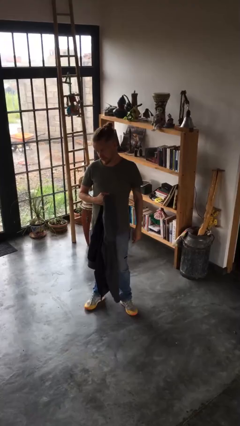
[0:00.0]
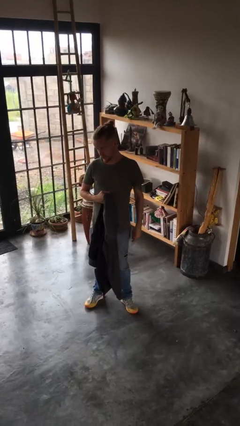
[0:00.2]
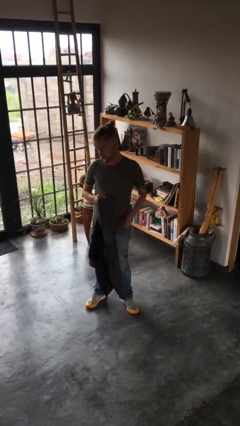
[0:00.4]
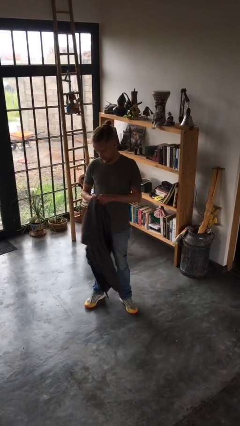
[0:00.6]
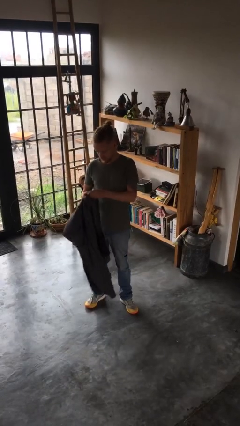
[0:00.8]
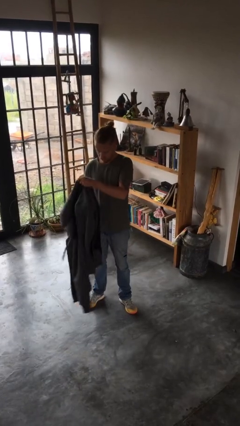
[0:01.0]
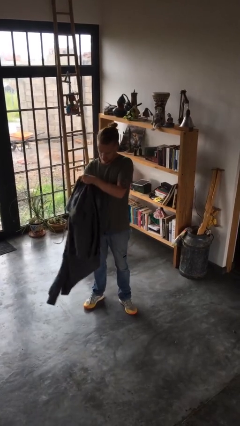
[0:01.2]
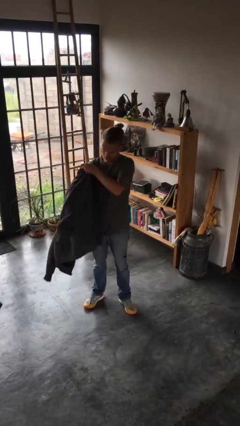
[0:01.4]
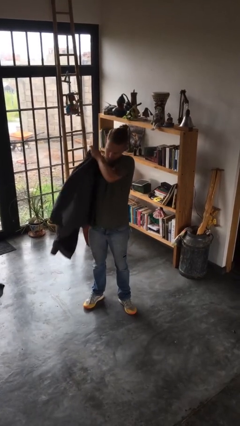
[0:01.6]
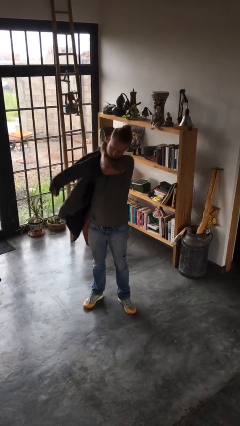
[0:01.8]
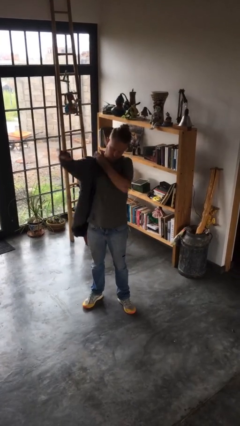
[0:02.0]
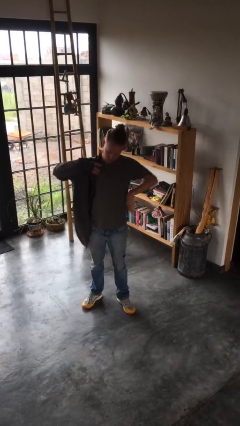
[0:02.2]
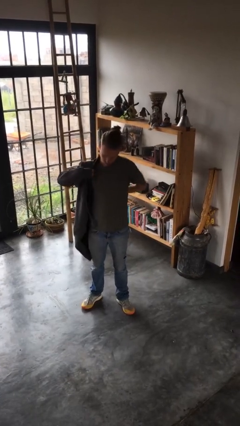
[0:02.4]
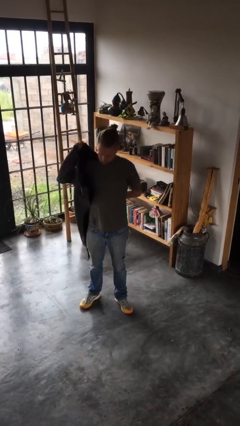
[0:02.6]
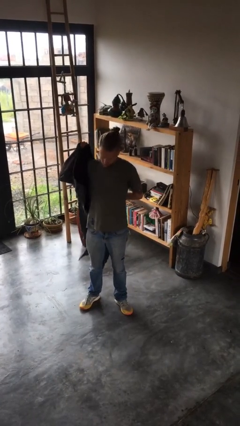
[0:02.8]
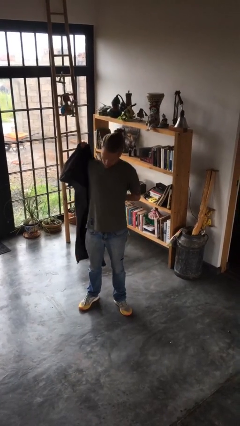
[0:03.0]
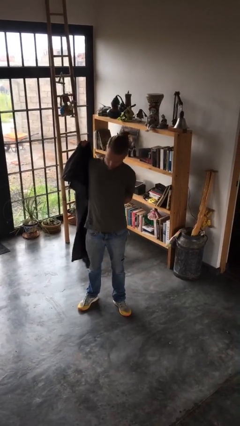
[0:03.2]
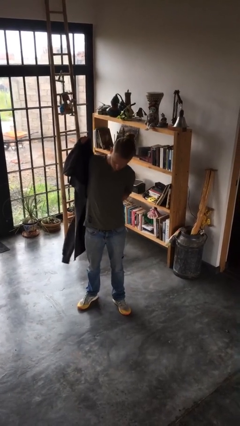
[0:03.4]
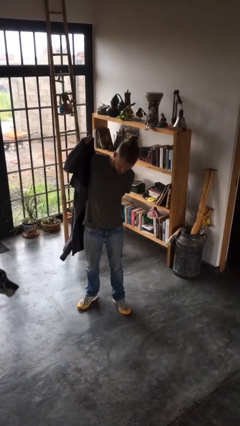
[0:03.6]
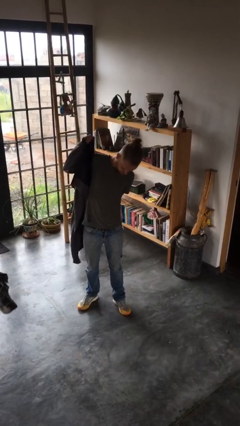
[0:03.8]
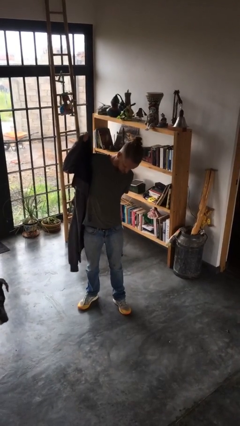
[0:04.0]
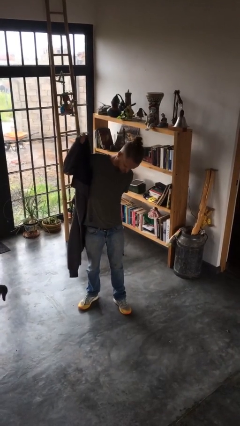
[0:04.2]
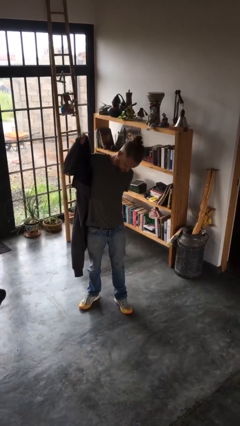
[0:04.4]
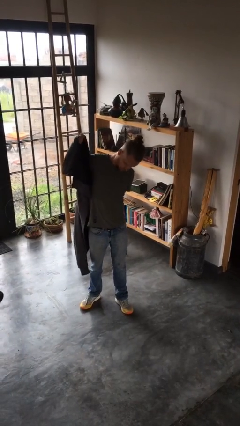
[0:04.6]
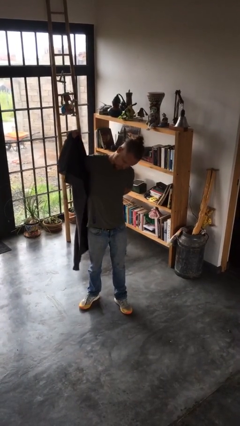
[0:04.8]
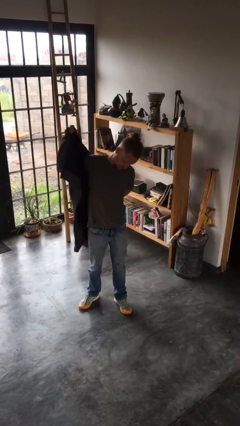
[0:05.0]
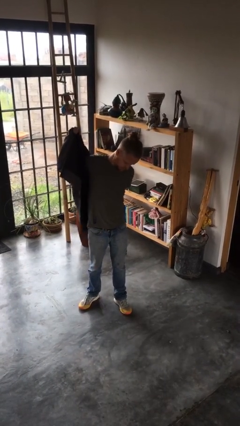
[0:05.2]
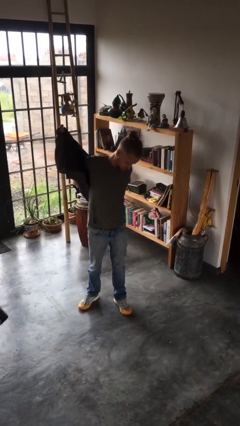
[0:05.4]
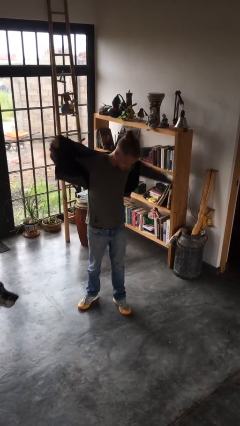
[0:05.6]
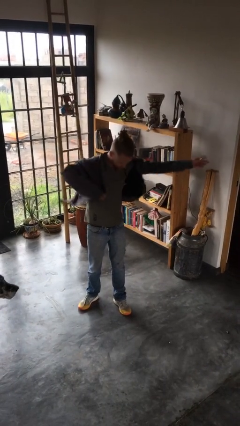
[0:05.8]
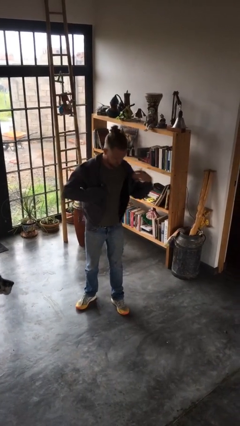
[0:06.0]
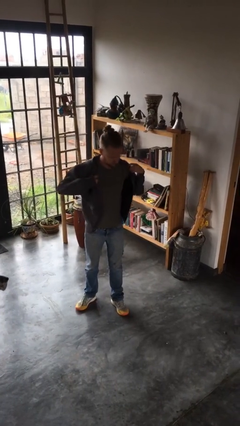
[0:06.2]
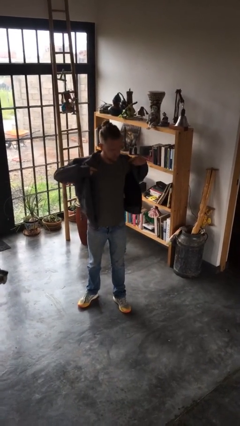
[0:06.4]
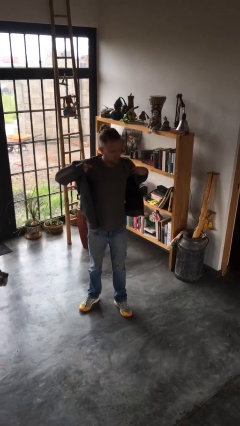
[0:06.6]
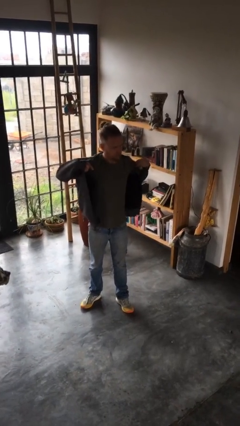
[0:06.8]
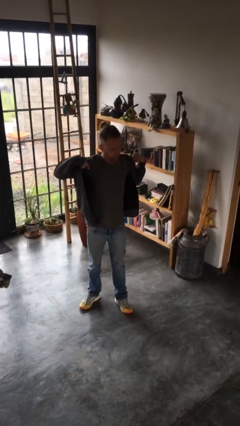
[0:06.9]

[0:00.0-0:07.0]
person puts on jacket

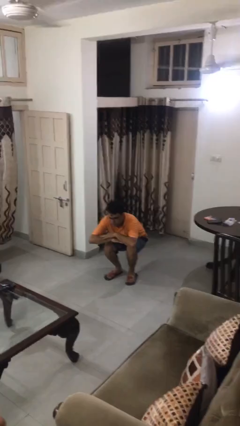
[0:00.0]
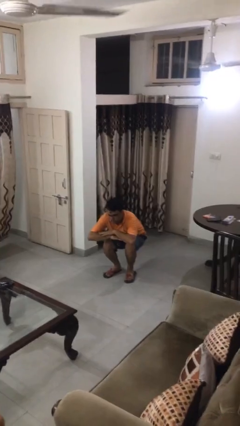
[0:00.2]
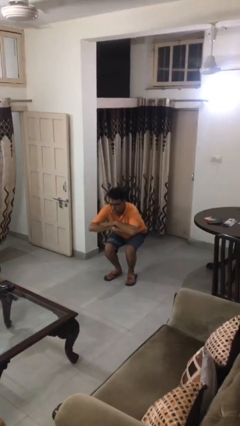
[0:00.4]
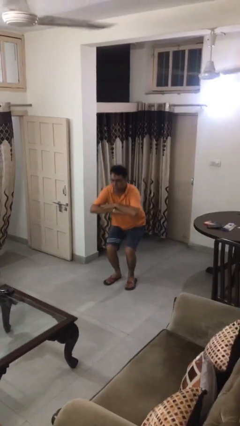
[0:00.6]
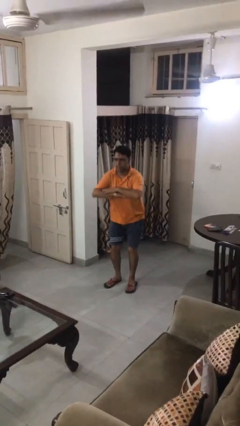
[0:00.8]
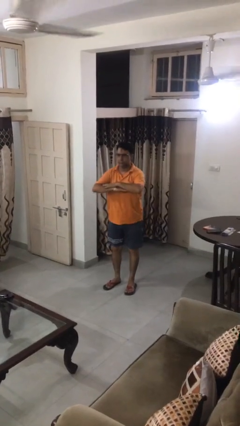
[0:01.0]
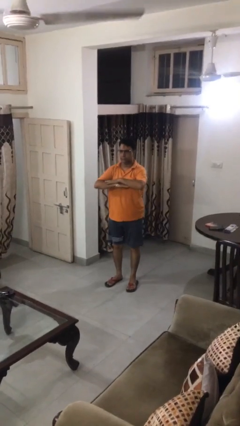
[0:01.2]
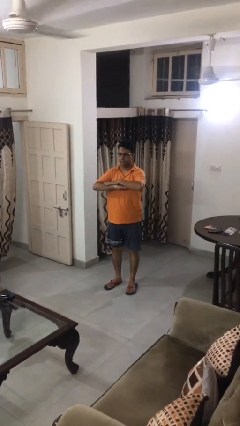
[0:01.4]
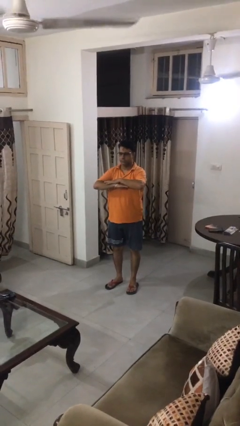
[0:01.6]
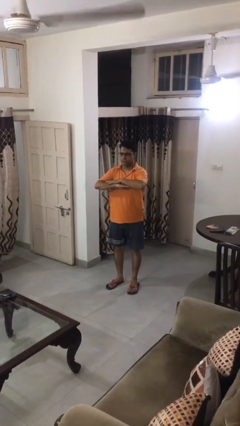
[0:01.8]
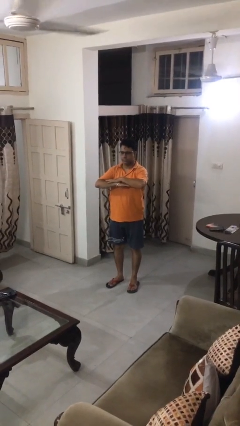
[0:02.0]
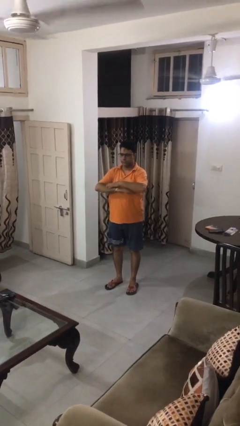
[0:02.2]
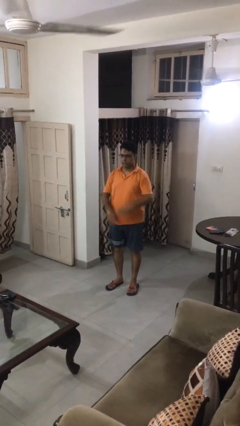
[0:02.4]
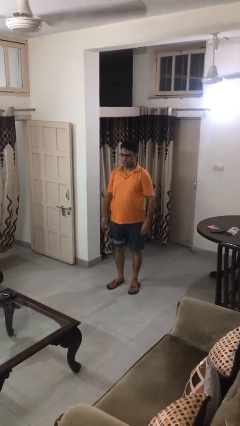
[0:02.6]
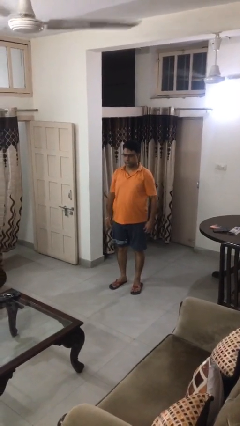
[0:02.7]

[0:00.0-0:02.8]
person stands up

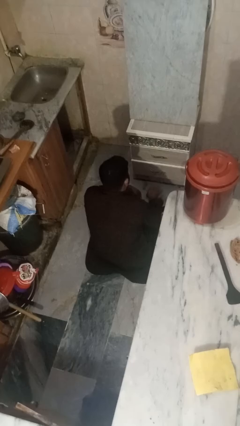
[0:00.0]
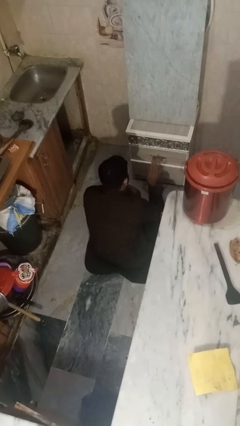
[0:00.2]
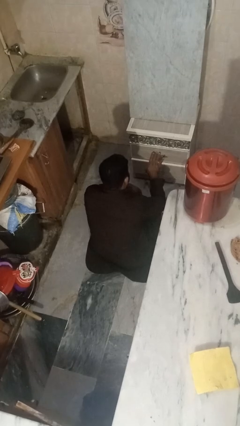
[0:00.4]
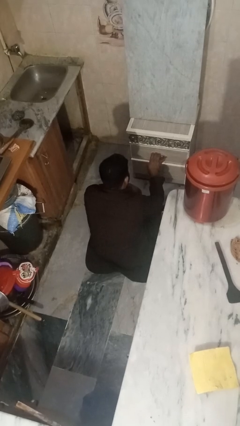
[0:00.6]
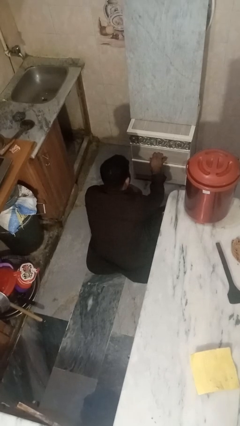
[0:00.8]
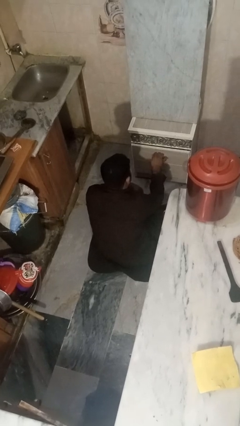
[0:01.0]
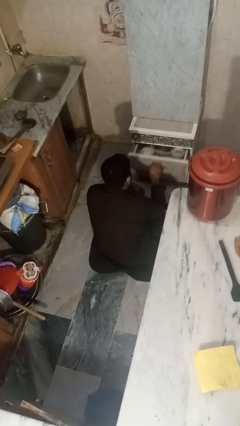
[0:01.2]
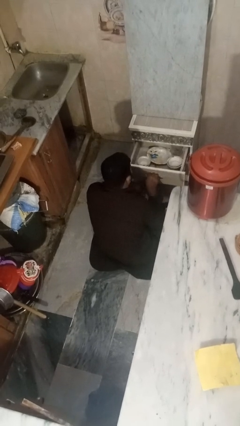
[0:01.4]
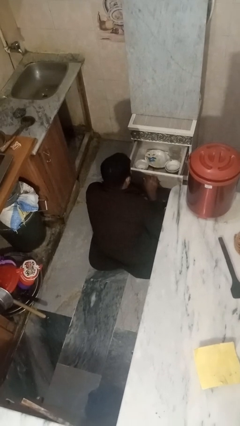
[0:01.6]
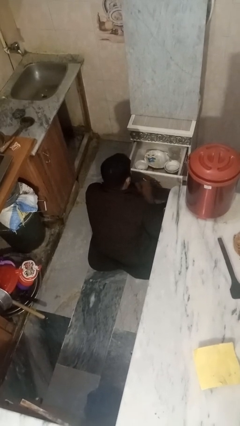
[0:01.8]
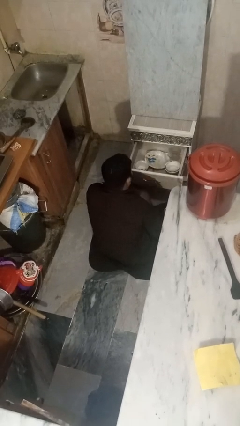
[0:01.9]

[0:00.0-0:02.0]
person opens kitchen drawer

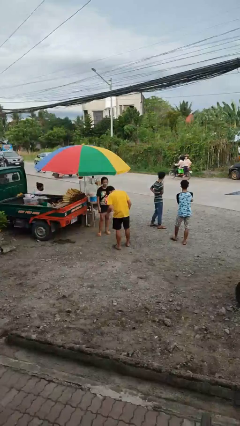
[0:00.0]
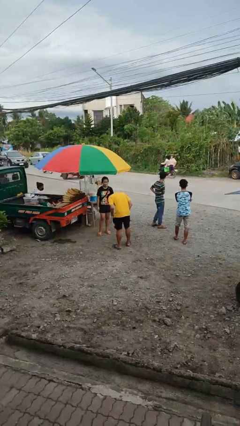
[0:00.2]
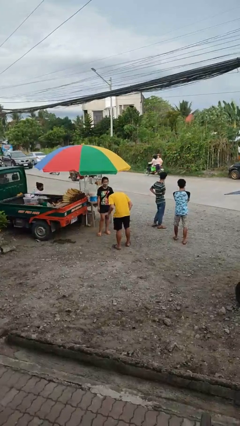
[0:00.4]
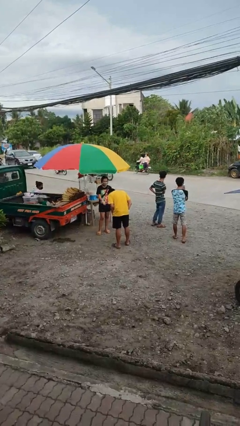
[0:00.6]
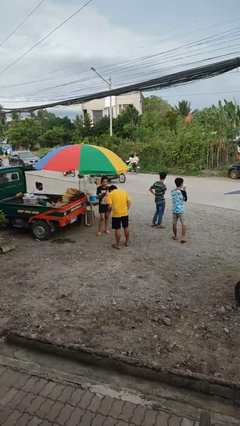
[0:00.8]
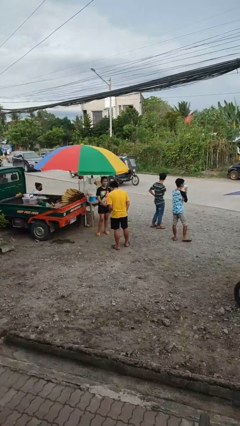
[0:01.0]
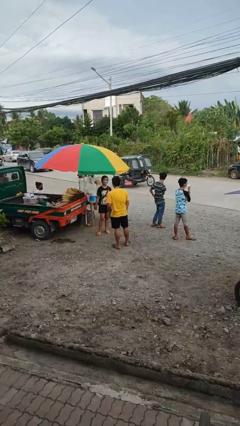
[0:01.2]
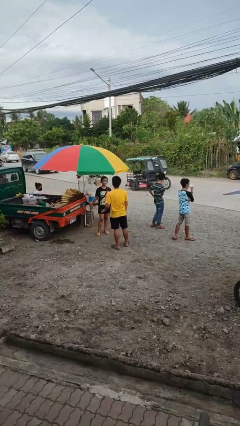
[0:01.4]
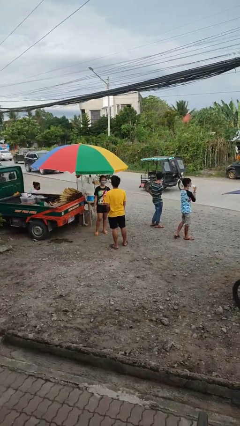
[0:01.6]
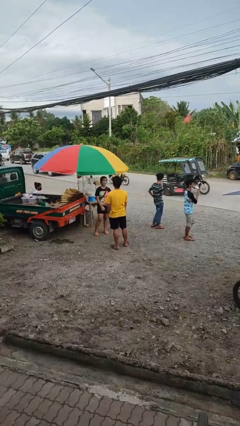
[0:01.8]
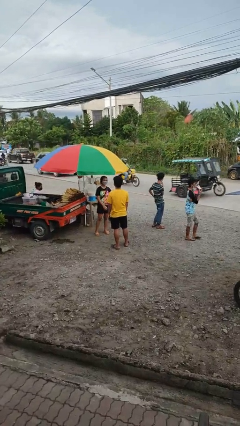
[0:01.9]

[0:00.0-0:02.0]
person laughs with person

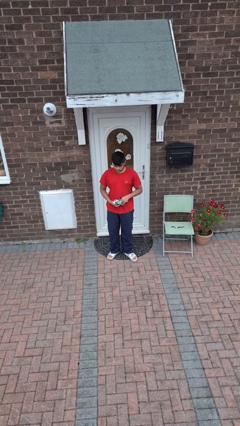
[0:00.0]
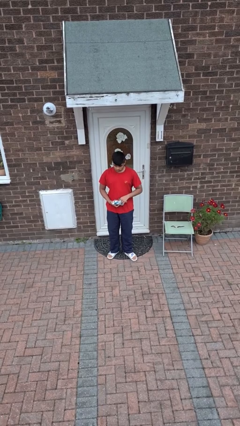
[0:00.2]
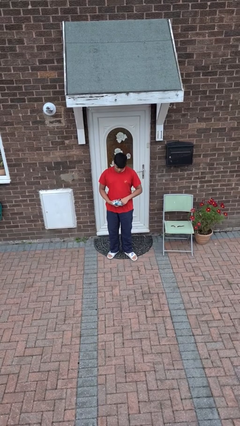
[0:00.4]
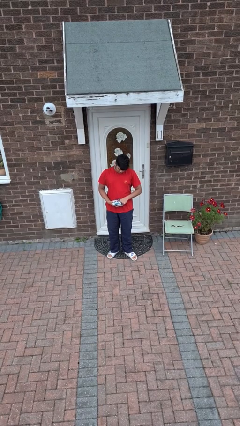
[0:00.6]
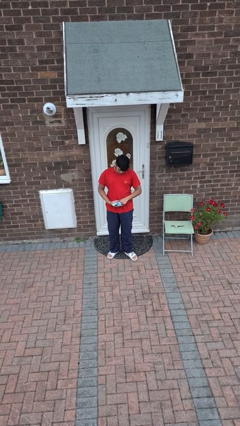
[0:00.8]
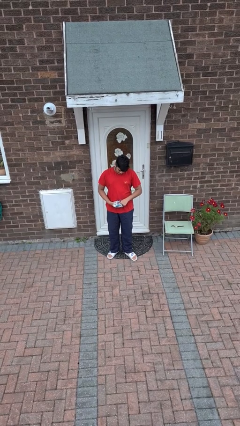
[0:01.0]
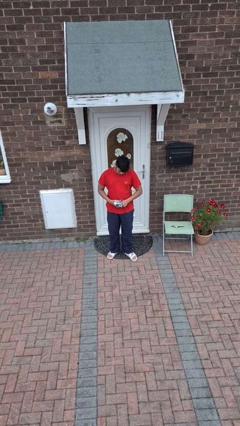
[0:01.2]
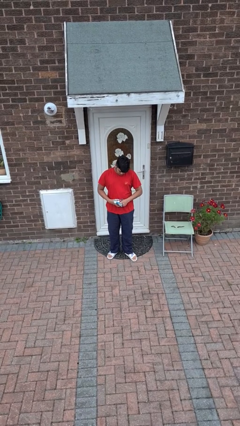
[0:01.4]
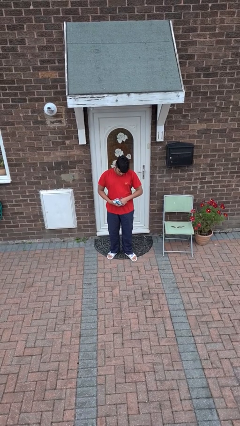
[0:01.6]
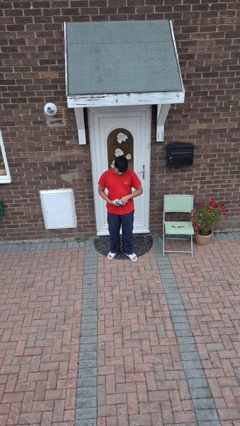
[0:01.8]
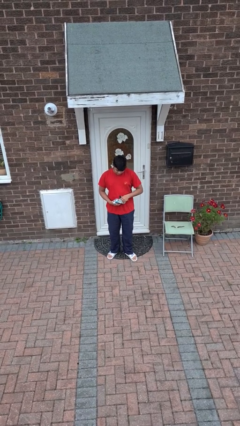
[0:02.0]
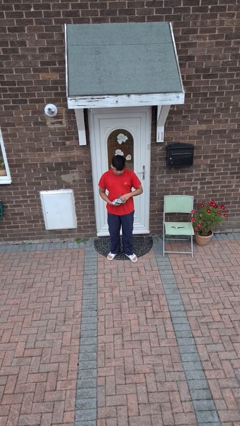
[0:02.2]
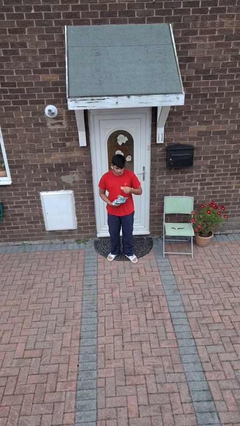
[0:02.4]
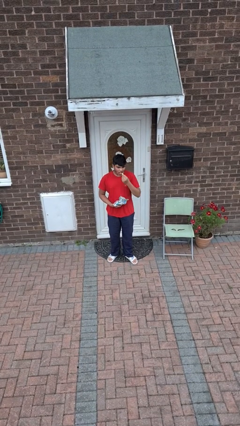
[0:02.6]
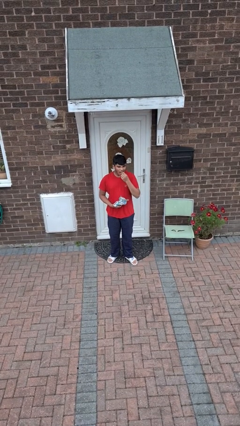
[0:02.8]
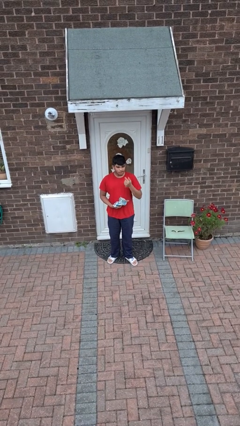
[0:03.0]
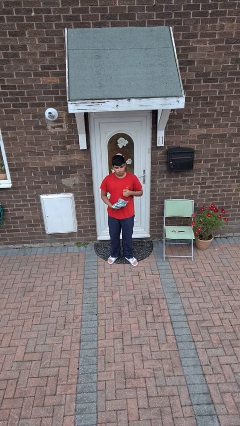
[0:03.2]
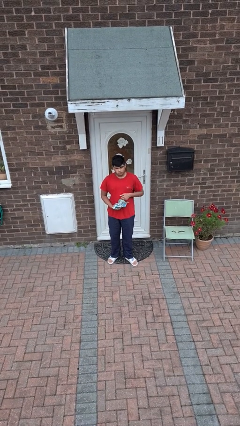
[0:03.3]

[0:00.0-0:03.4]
person eats snack from bag
